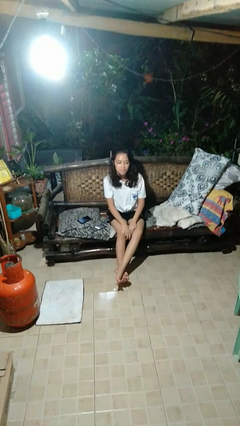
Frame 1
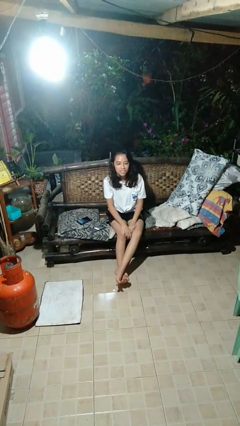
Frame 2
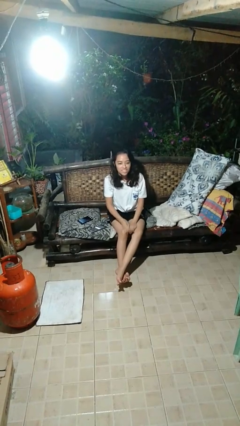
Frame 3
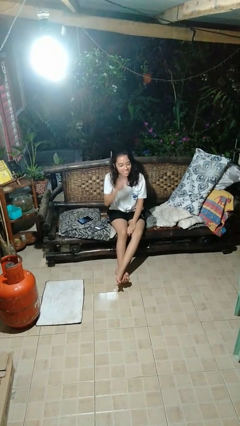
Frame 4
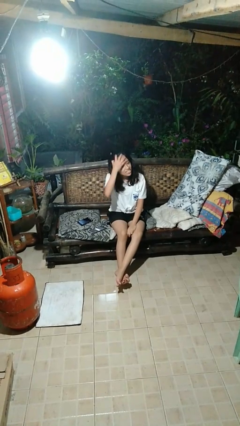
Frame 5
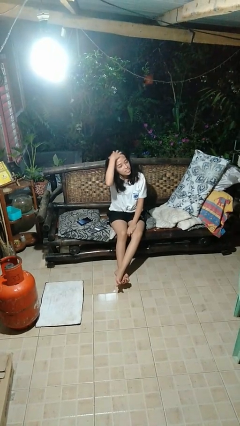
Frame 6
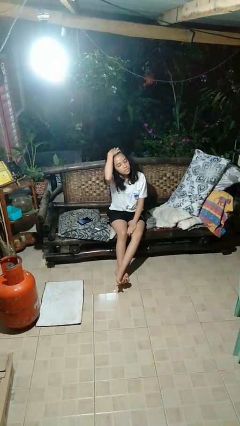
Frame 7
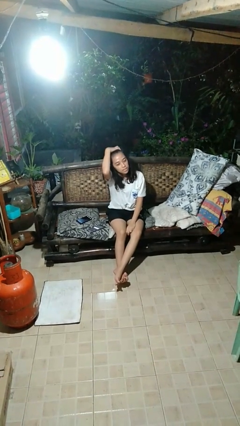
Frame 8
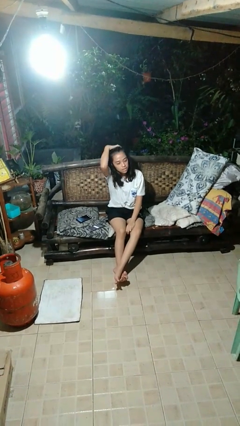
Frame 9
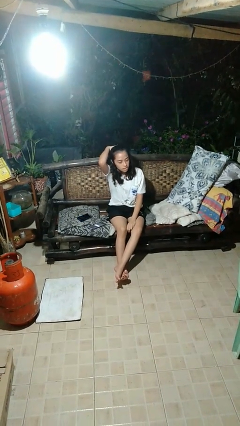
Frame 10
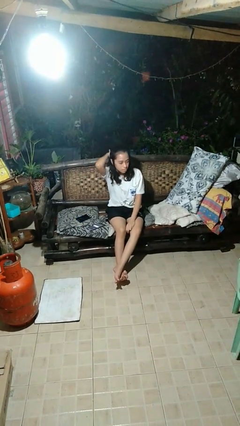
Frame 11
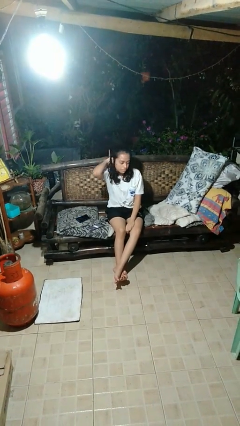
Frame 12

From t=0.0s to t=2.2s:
person strokes hair

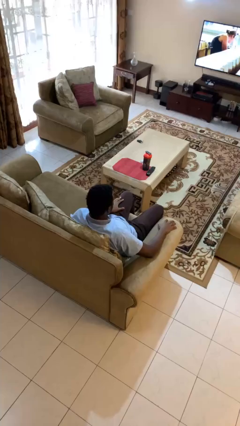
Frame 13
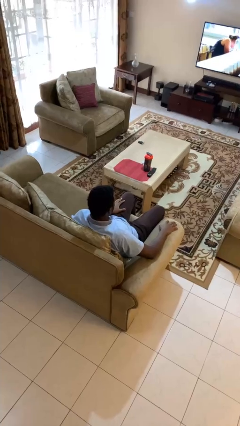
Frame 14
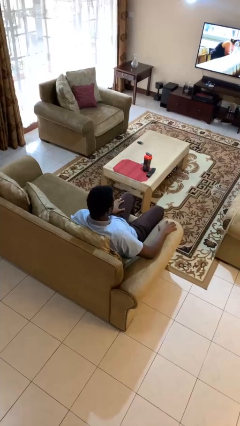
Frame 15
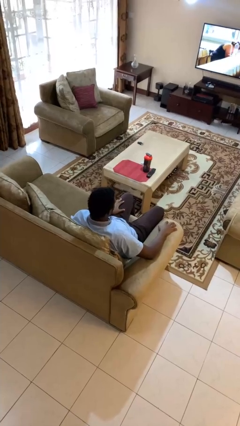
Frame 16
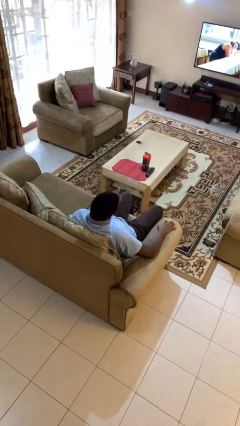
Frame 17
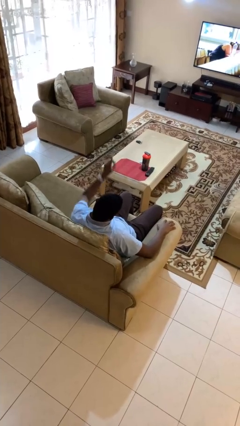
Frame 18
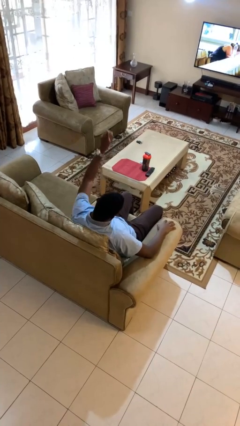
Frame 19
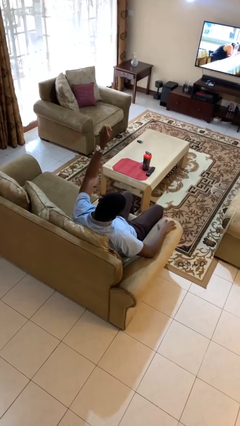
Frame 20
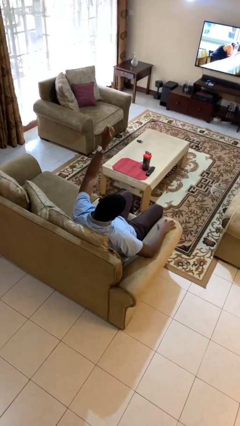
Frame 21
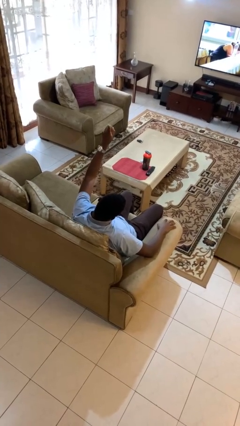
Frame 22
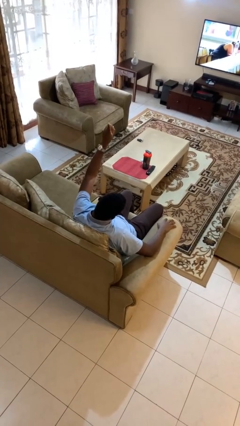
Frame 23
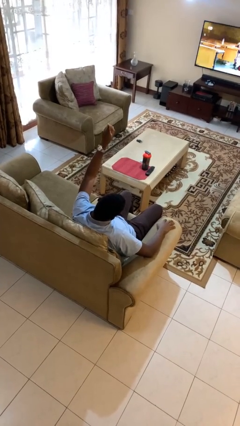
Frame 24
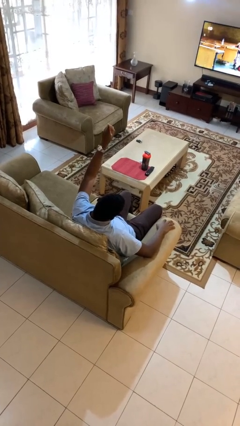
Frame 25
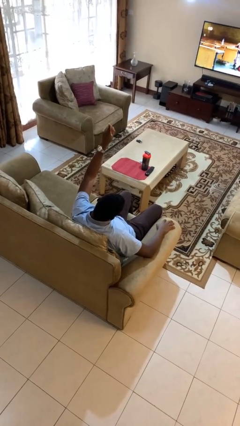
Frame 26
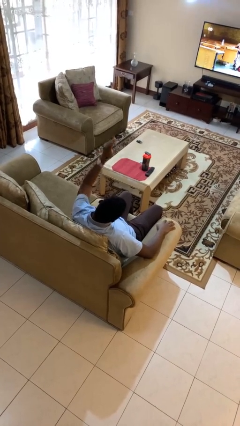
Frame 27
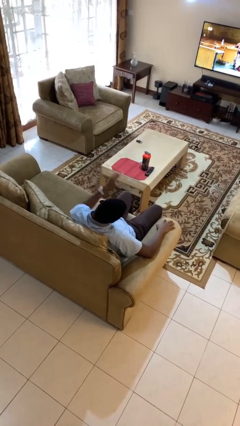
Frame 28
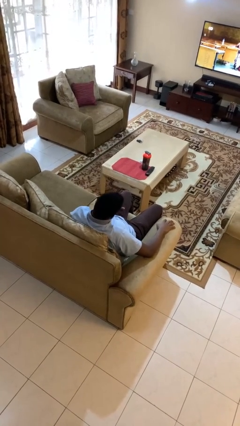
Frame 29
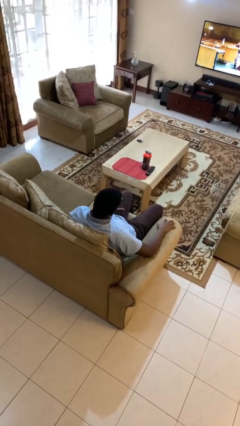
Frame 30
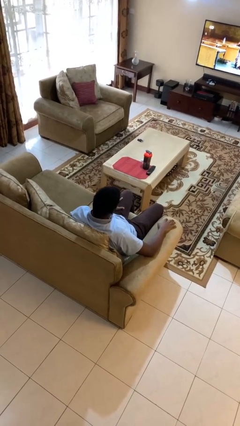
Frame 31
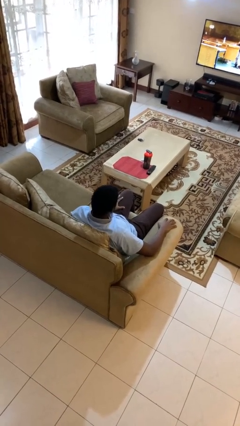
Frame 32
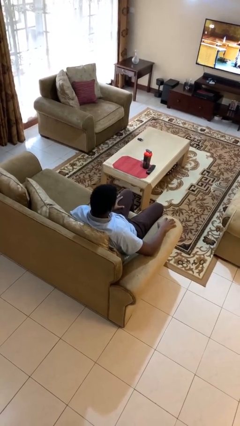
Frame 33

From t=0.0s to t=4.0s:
person gestures number one

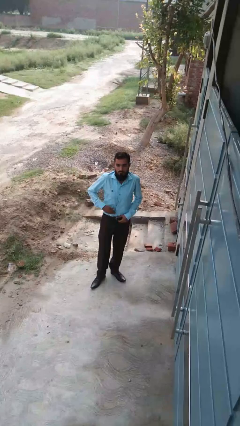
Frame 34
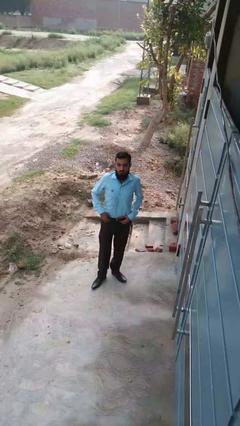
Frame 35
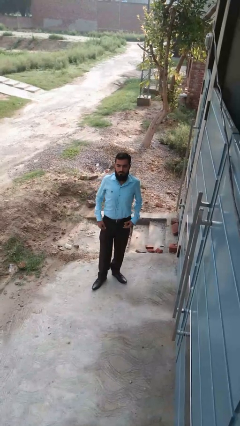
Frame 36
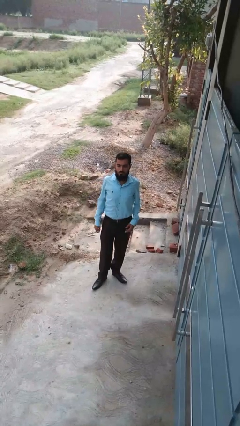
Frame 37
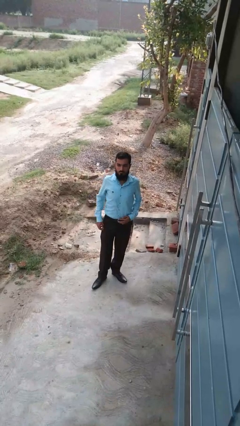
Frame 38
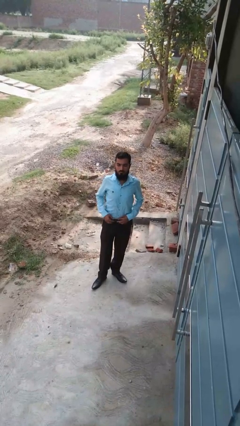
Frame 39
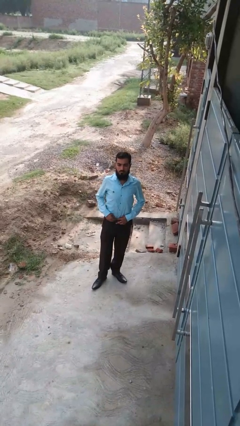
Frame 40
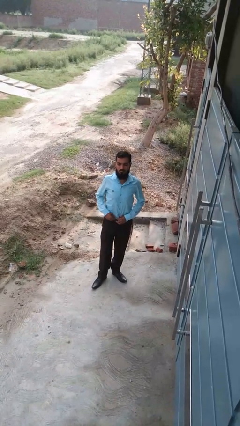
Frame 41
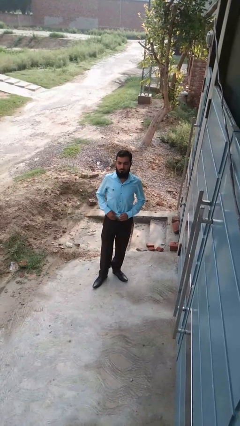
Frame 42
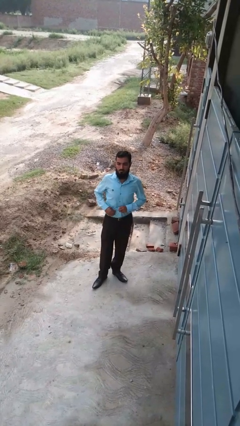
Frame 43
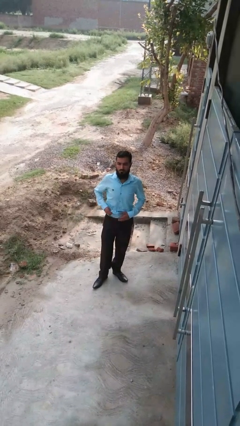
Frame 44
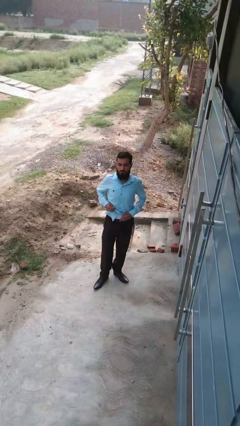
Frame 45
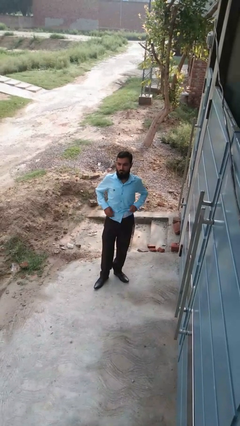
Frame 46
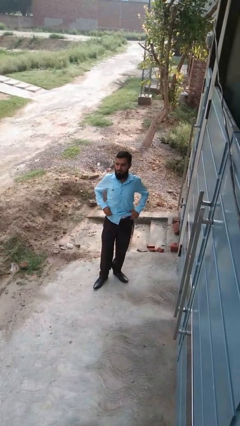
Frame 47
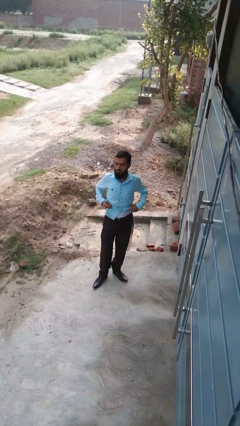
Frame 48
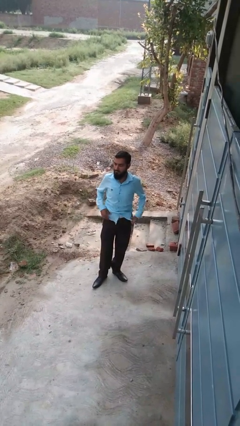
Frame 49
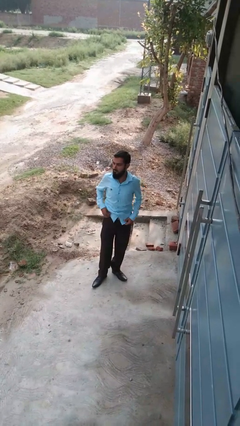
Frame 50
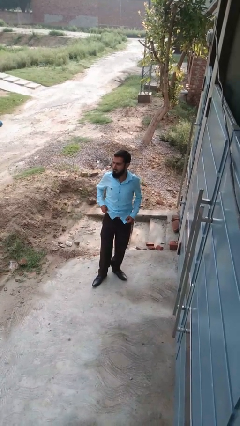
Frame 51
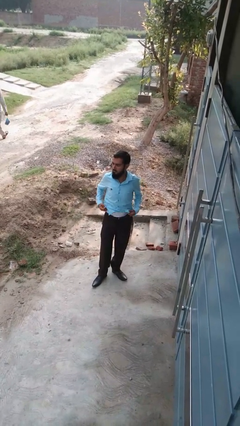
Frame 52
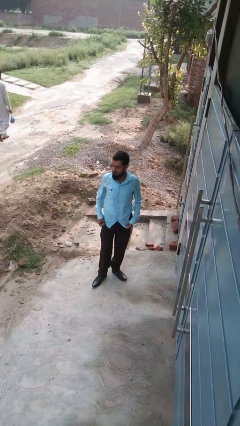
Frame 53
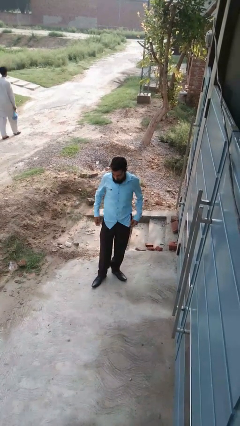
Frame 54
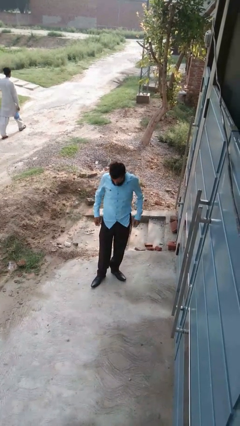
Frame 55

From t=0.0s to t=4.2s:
person untucks shirt

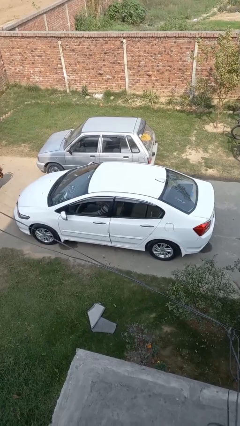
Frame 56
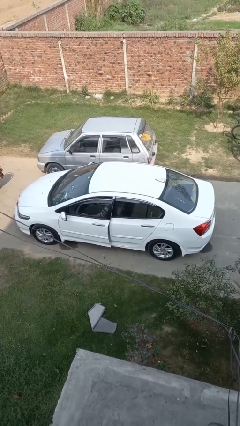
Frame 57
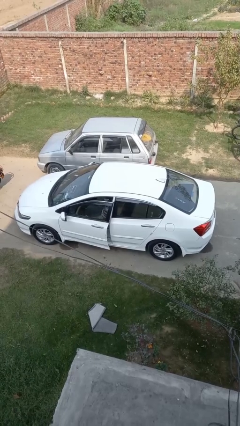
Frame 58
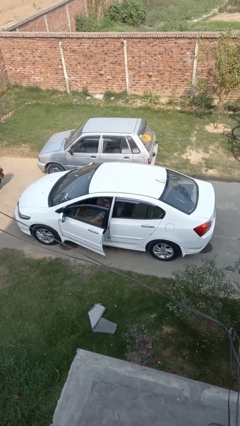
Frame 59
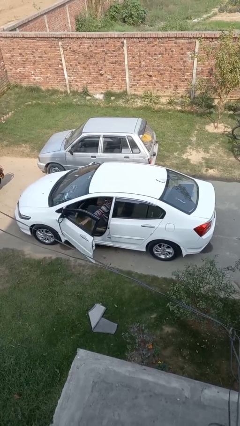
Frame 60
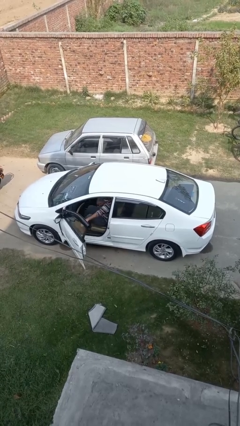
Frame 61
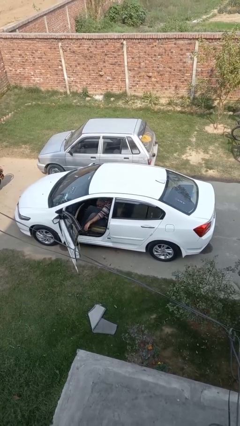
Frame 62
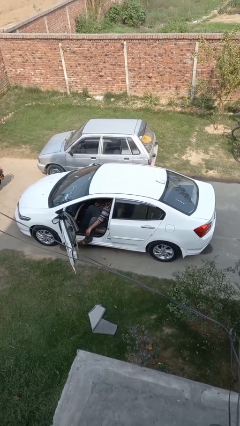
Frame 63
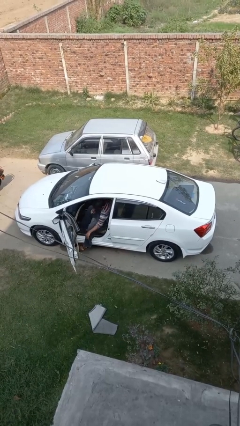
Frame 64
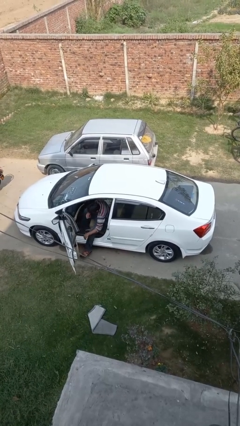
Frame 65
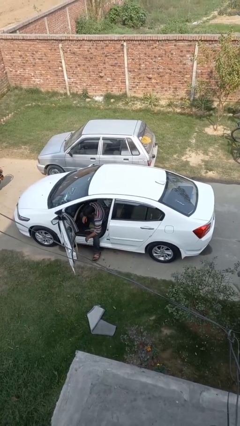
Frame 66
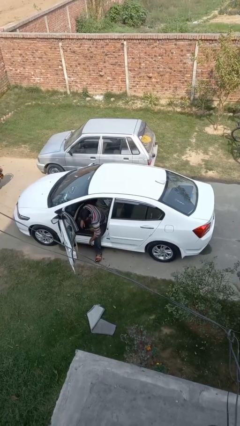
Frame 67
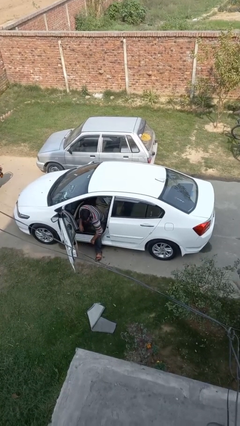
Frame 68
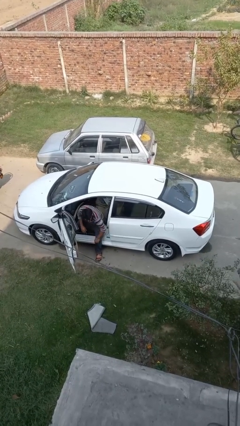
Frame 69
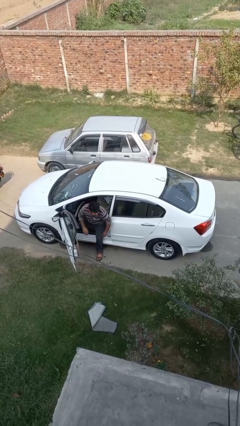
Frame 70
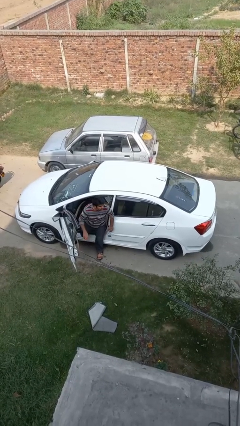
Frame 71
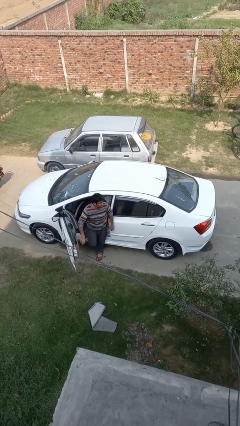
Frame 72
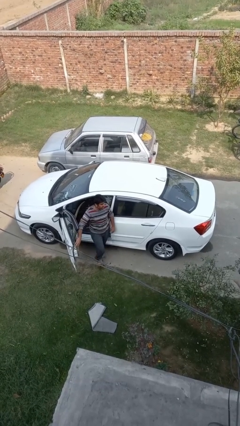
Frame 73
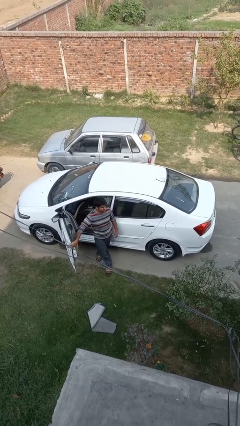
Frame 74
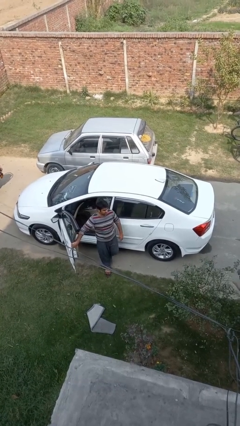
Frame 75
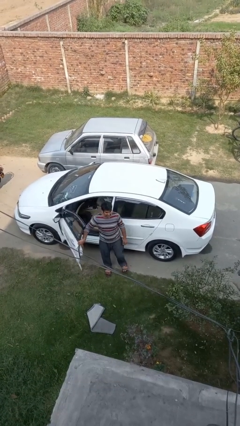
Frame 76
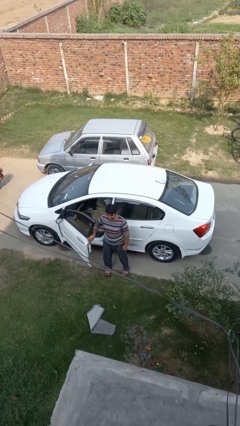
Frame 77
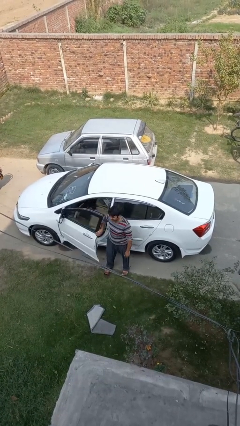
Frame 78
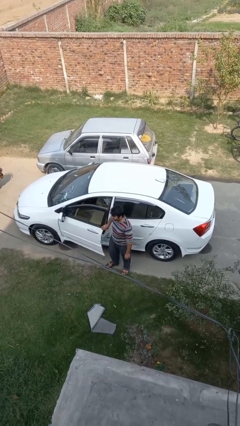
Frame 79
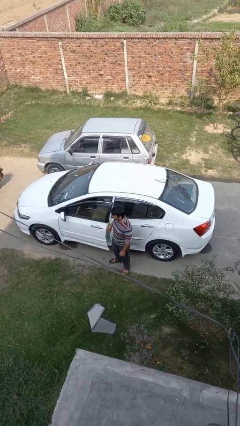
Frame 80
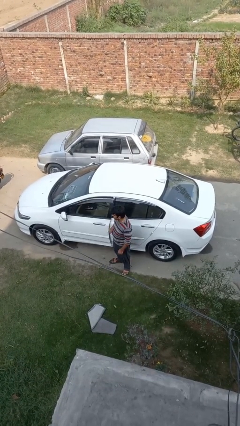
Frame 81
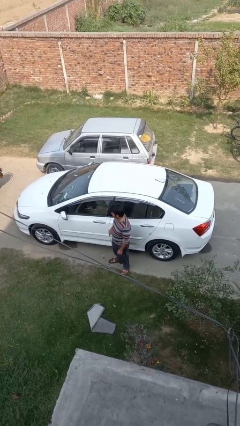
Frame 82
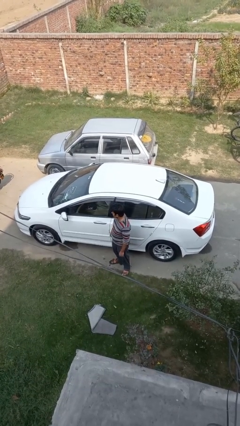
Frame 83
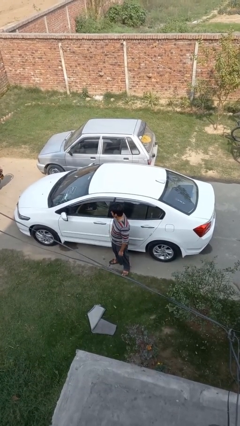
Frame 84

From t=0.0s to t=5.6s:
car drops off person

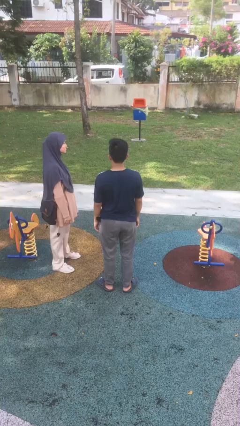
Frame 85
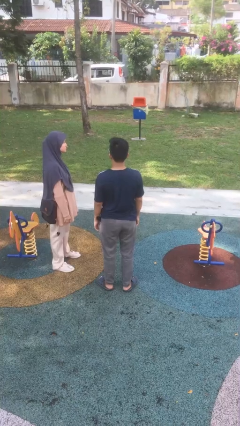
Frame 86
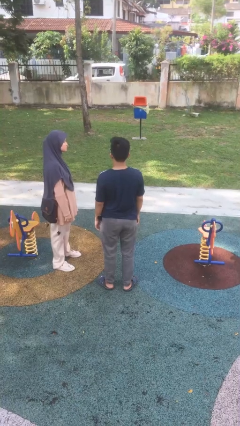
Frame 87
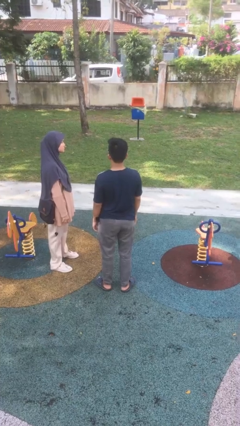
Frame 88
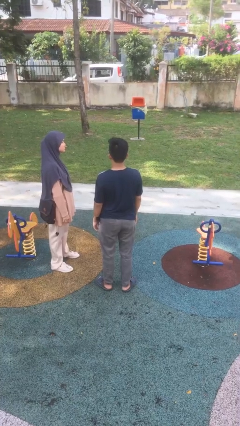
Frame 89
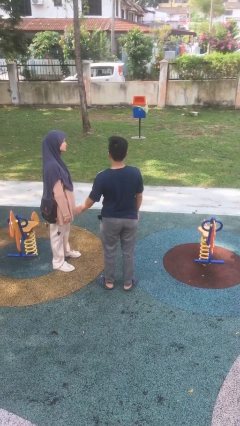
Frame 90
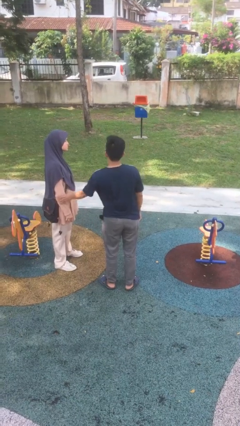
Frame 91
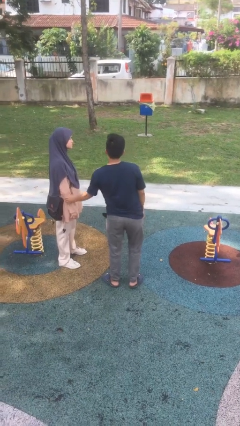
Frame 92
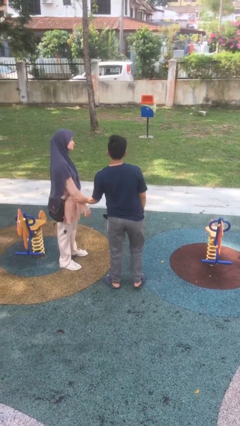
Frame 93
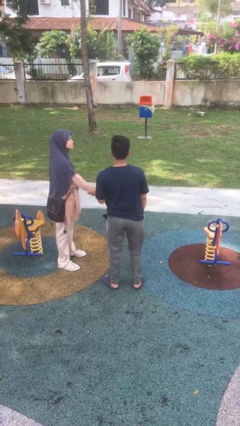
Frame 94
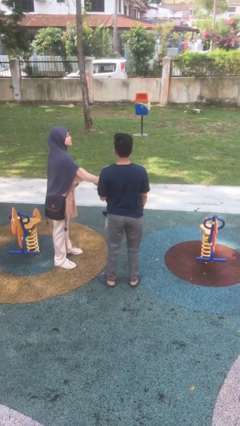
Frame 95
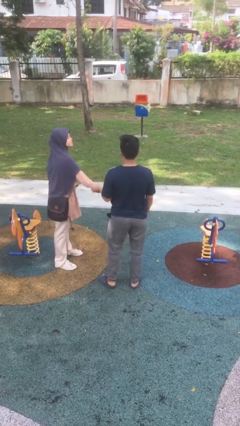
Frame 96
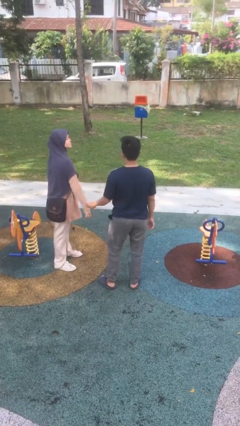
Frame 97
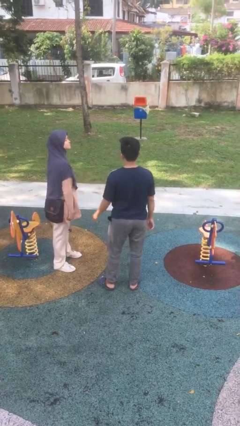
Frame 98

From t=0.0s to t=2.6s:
person grabs person by forearm
